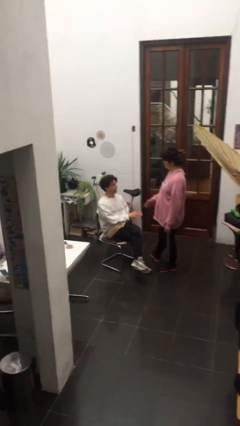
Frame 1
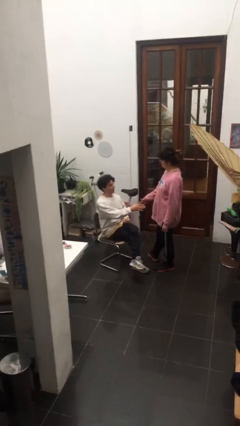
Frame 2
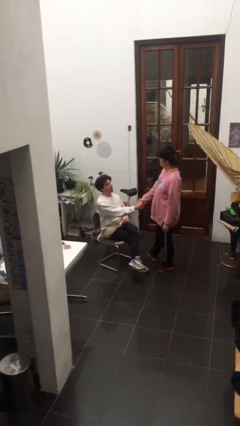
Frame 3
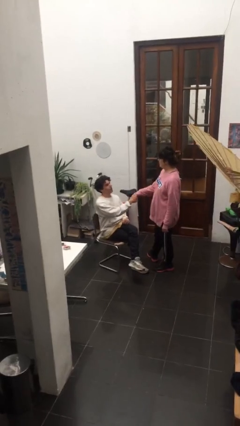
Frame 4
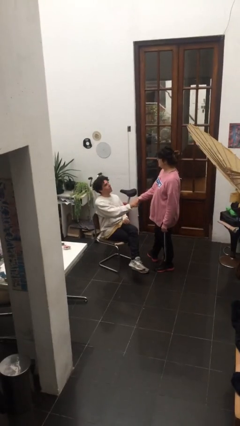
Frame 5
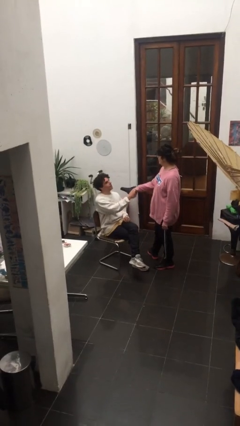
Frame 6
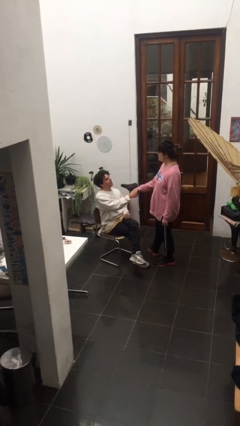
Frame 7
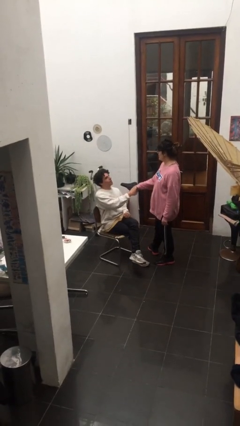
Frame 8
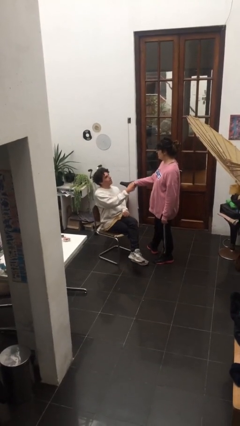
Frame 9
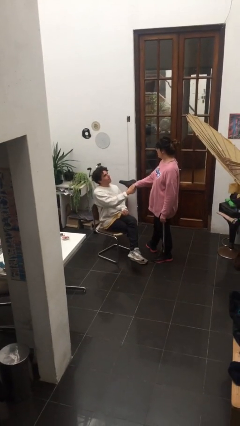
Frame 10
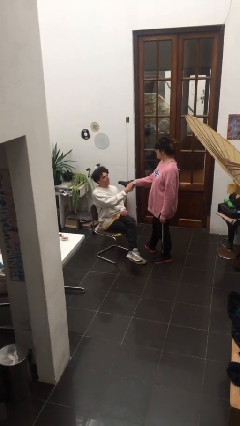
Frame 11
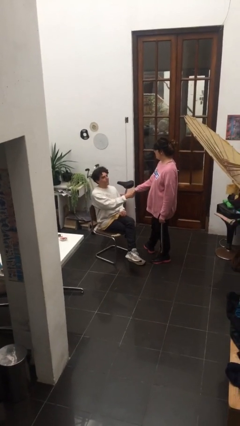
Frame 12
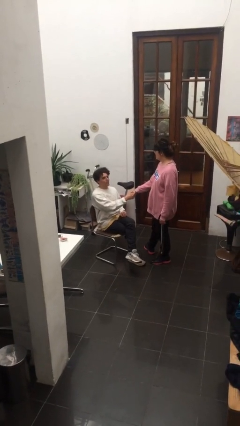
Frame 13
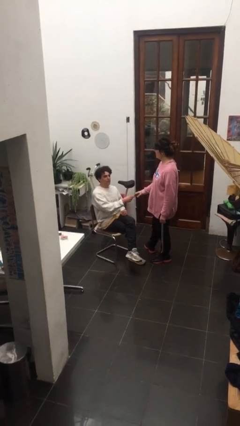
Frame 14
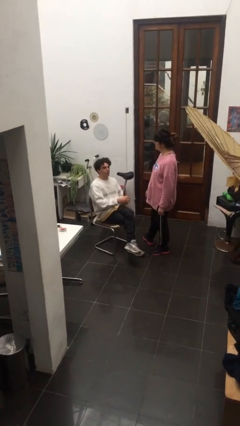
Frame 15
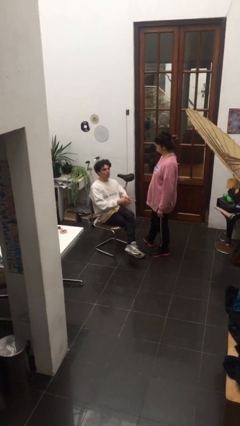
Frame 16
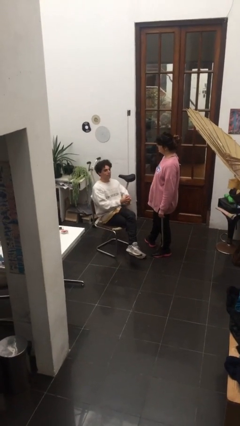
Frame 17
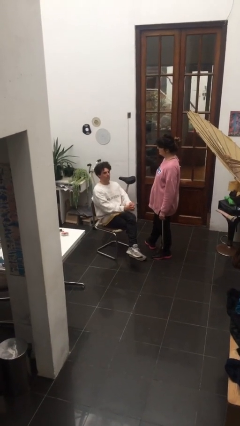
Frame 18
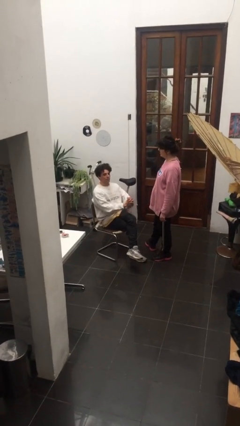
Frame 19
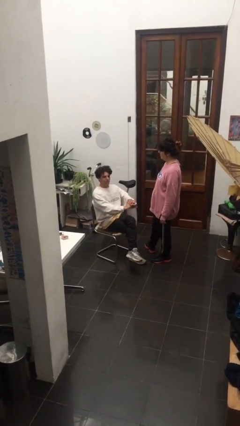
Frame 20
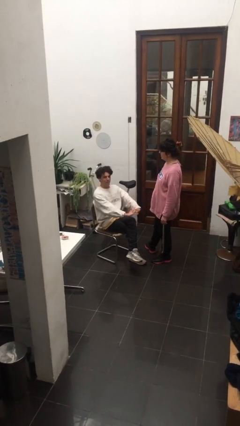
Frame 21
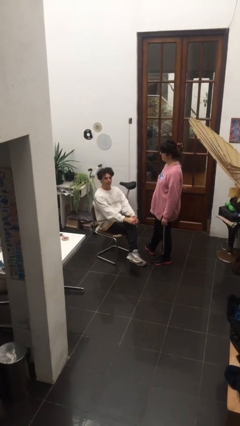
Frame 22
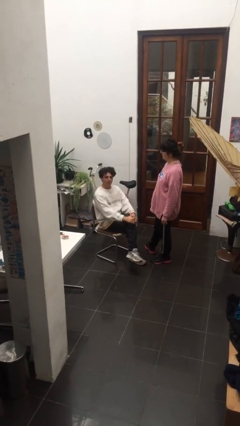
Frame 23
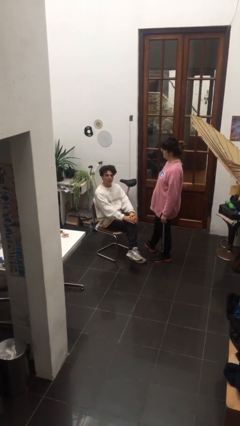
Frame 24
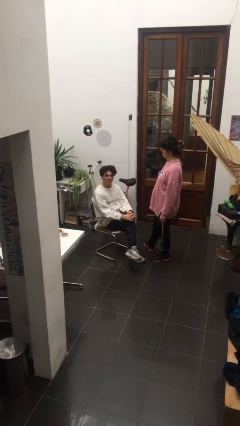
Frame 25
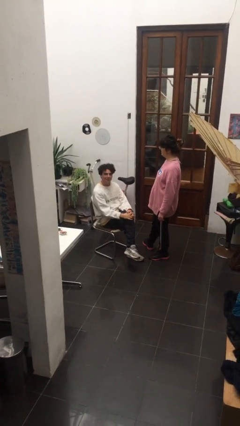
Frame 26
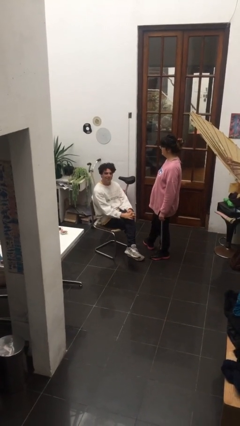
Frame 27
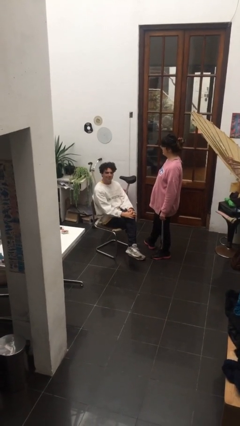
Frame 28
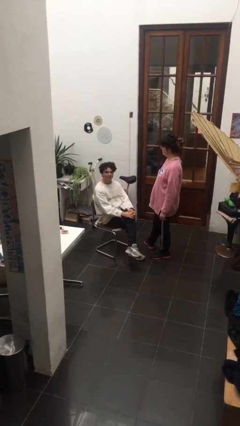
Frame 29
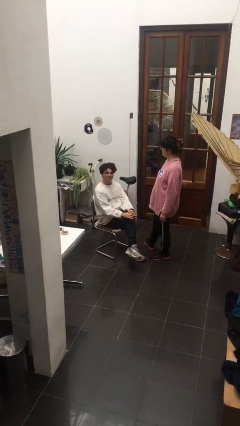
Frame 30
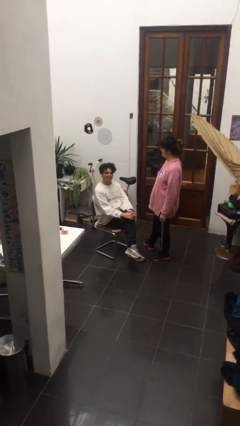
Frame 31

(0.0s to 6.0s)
person shakes hand

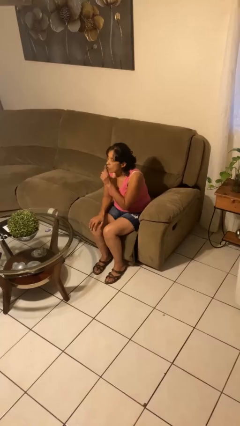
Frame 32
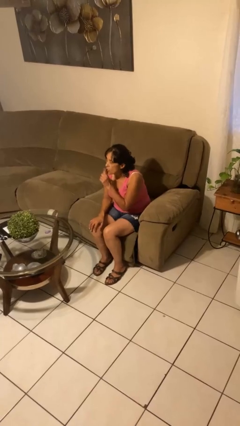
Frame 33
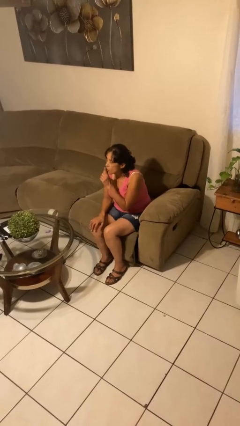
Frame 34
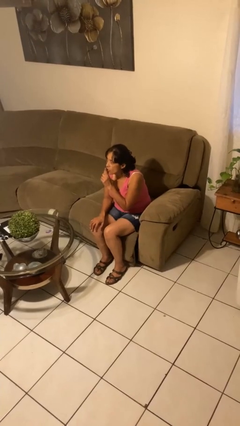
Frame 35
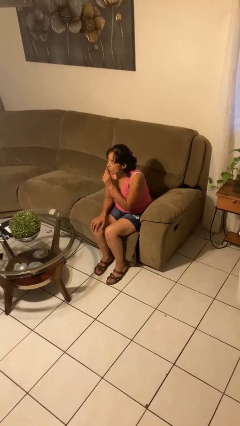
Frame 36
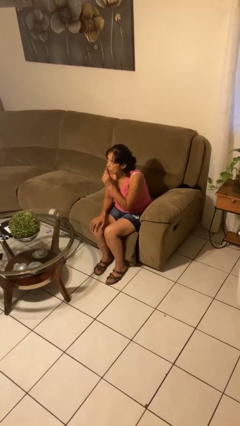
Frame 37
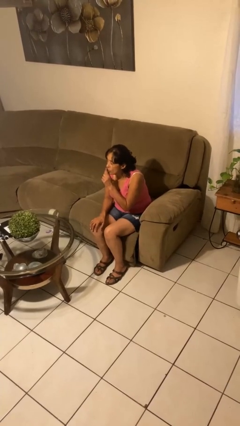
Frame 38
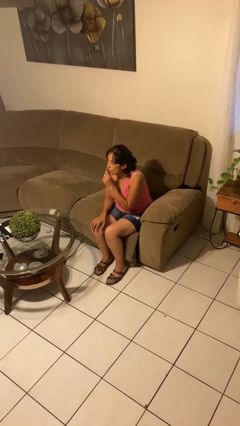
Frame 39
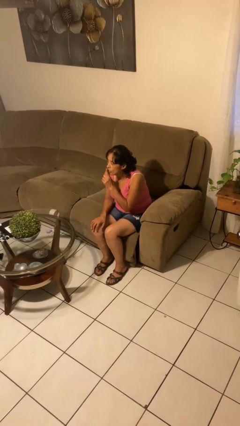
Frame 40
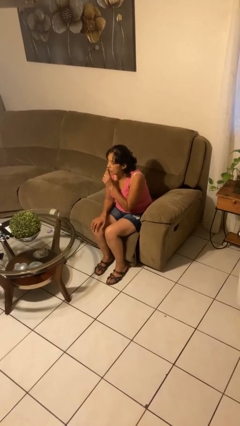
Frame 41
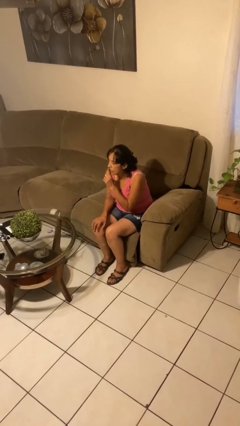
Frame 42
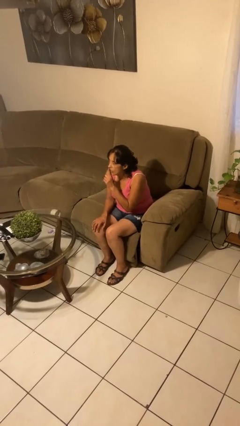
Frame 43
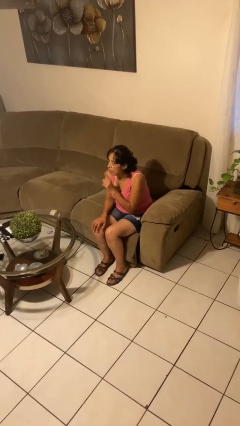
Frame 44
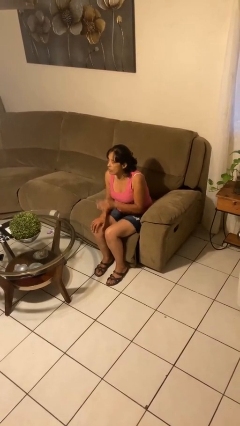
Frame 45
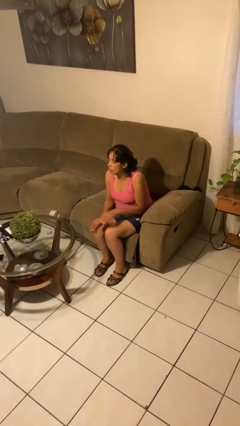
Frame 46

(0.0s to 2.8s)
person gestures be quiet

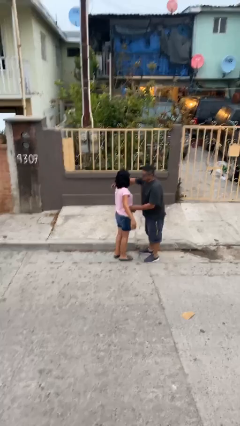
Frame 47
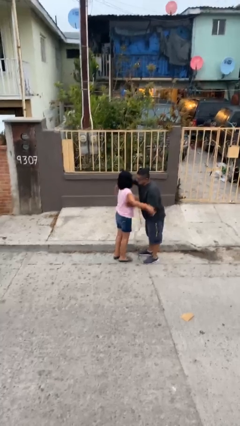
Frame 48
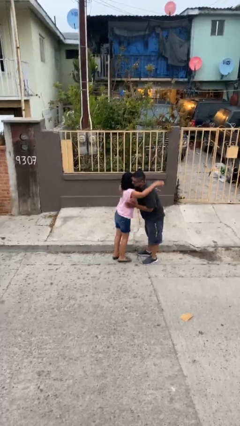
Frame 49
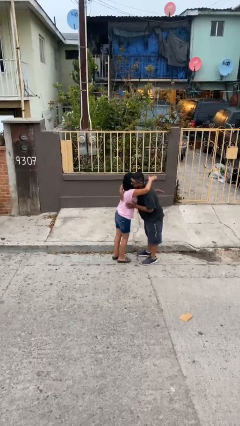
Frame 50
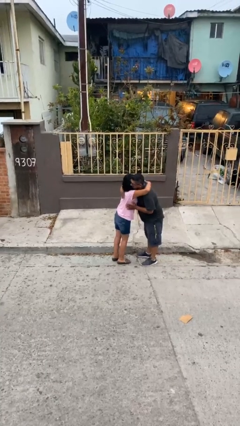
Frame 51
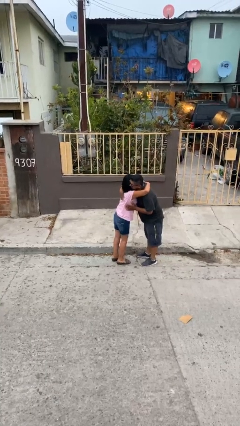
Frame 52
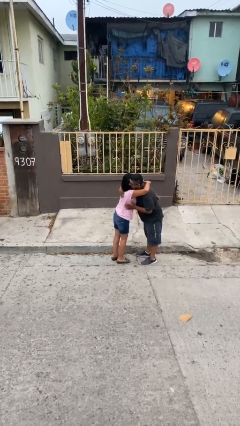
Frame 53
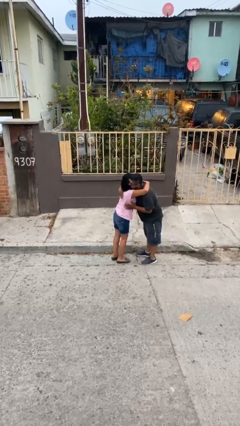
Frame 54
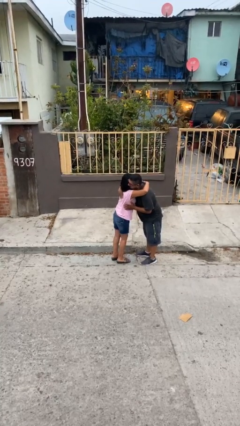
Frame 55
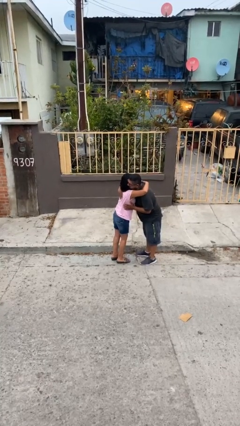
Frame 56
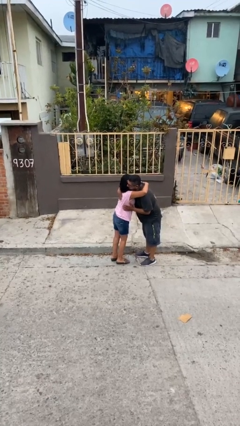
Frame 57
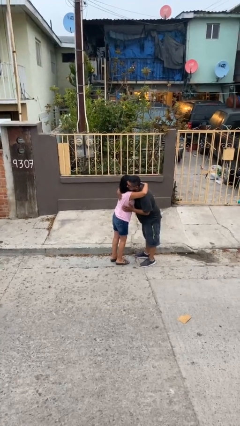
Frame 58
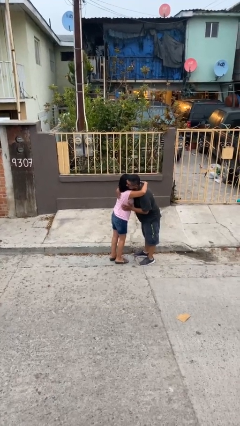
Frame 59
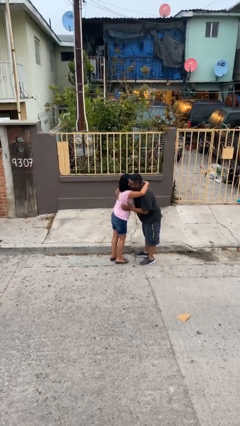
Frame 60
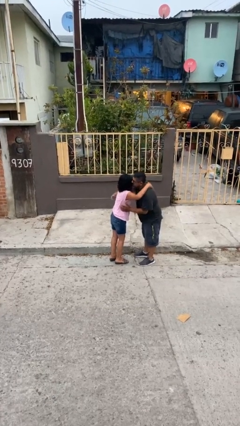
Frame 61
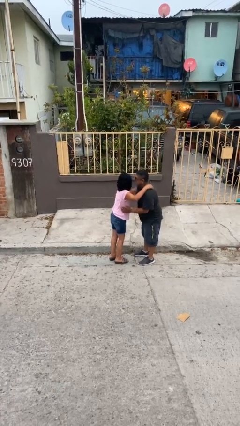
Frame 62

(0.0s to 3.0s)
person embraces person

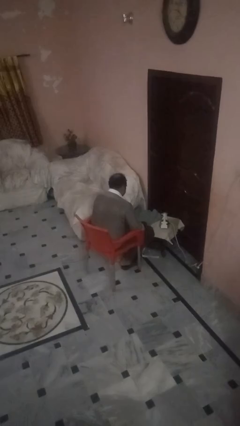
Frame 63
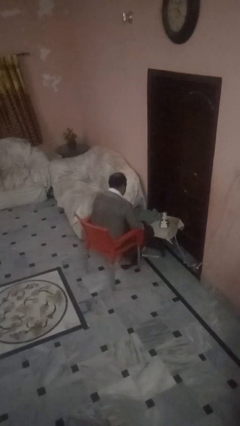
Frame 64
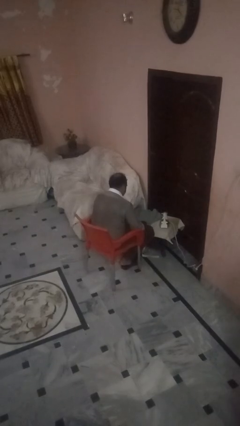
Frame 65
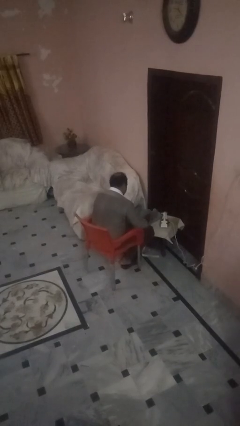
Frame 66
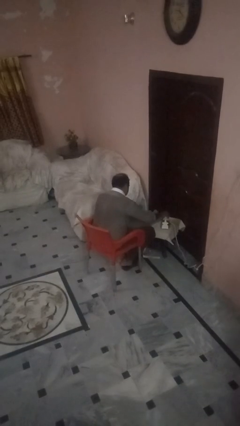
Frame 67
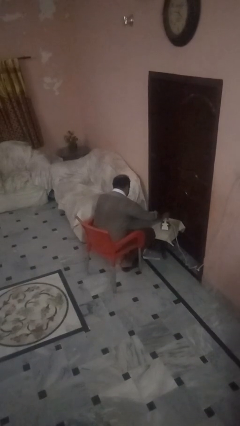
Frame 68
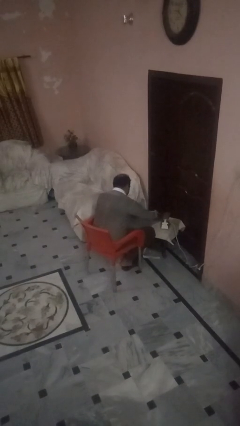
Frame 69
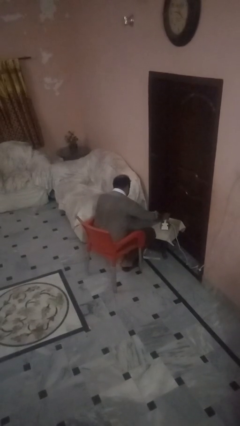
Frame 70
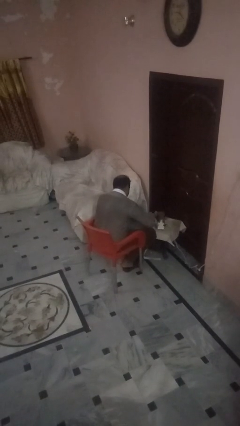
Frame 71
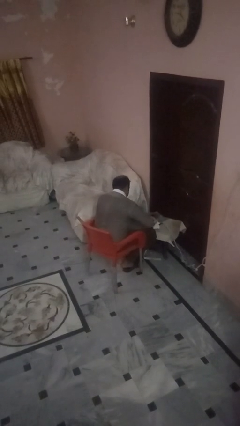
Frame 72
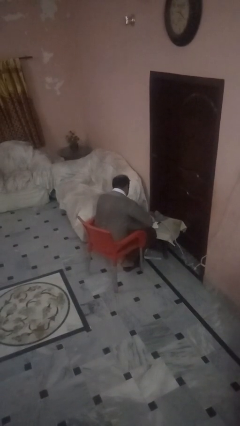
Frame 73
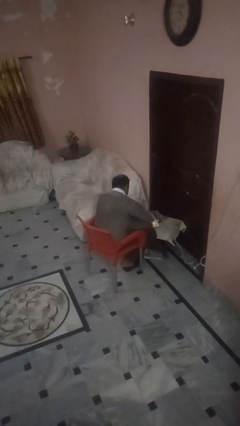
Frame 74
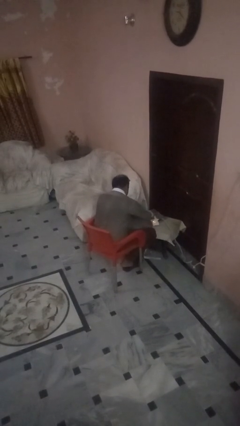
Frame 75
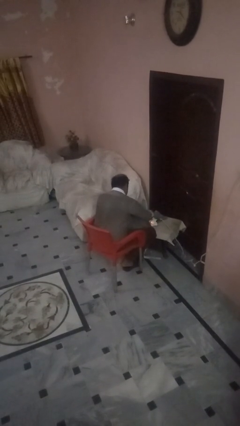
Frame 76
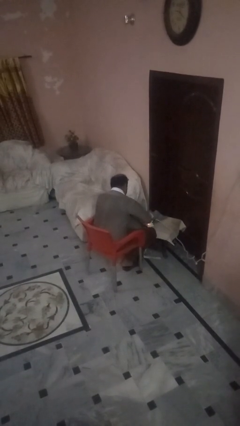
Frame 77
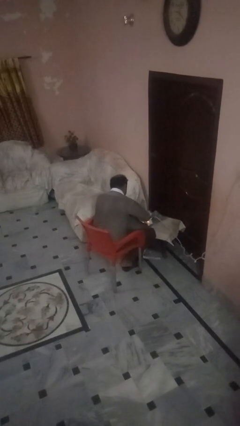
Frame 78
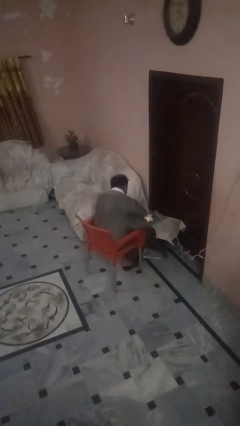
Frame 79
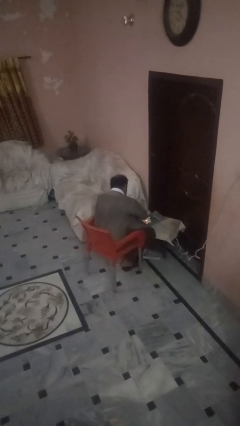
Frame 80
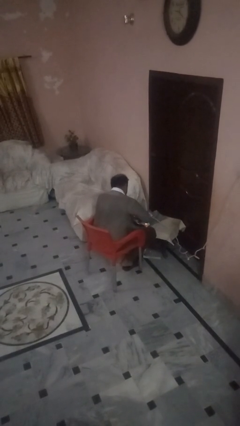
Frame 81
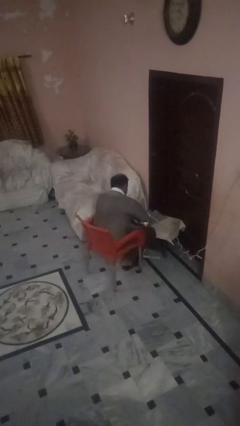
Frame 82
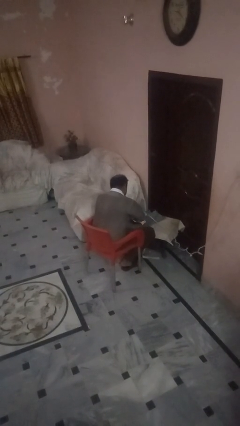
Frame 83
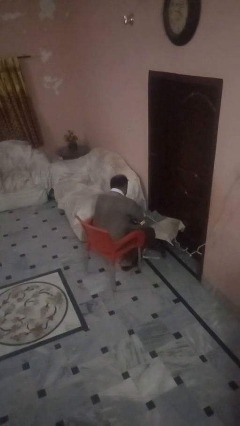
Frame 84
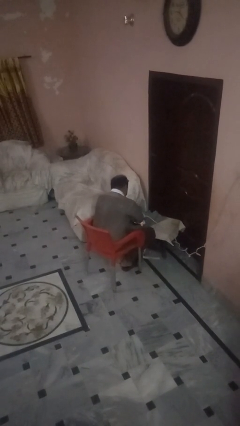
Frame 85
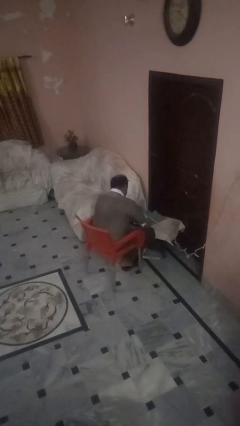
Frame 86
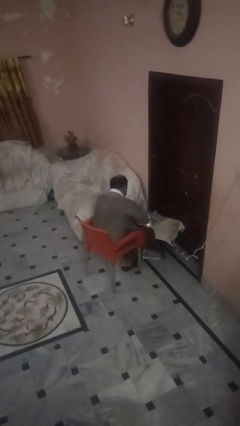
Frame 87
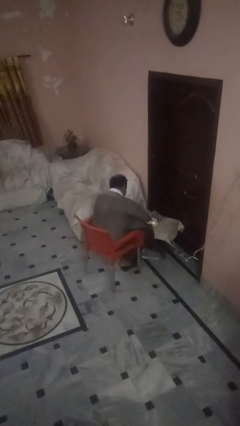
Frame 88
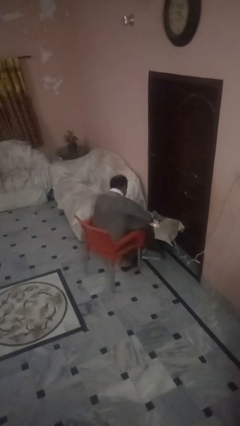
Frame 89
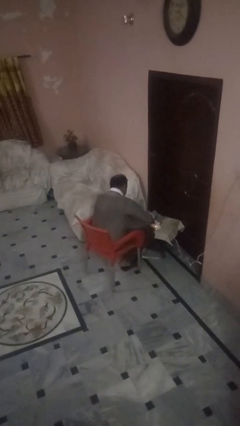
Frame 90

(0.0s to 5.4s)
person irons clothes

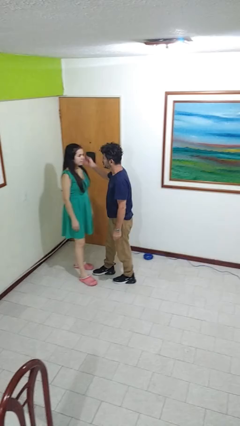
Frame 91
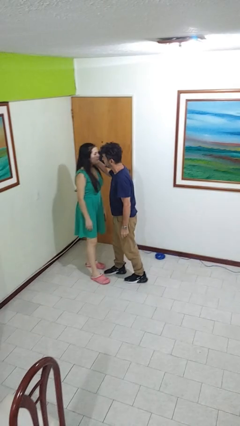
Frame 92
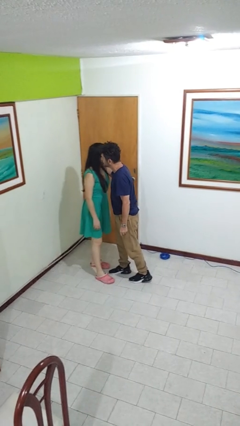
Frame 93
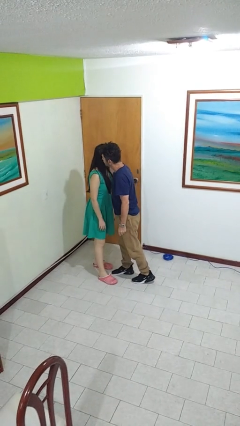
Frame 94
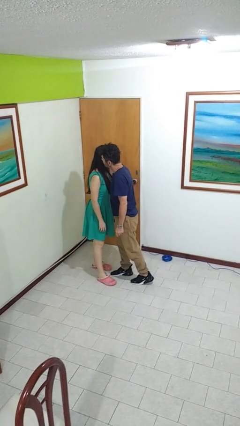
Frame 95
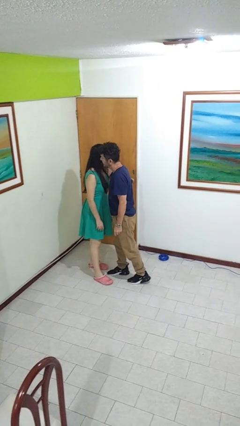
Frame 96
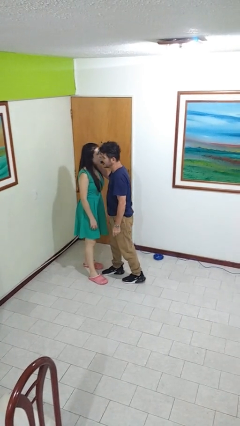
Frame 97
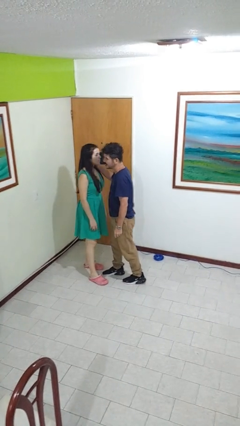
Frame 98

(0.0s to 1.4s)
person kisses cheek of person
